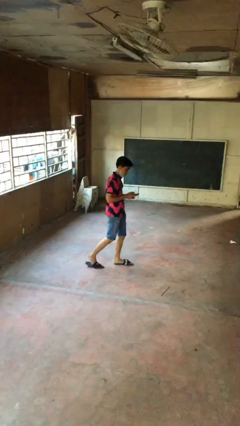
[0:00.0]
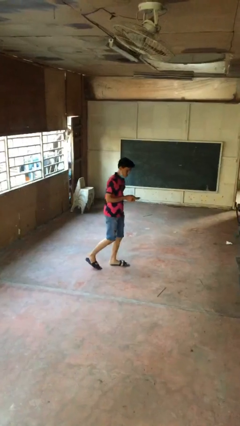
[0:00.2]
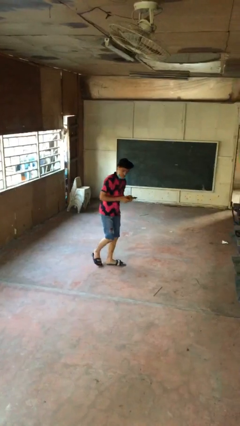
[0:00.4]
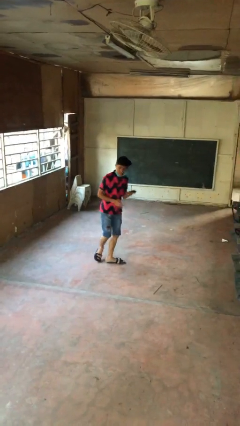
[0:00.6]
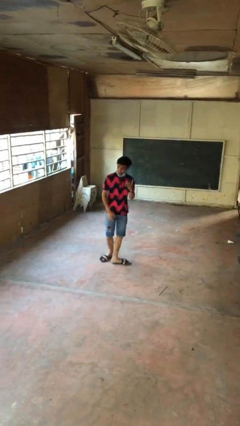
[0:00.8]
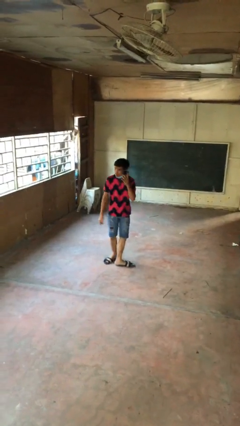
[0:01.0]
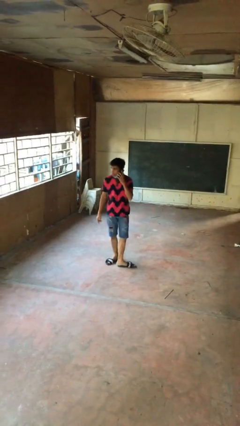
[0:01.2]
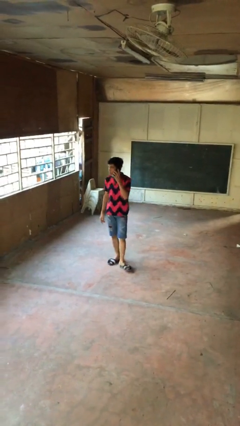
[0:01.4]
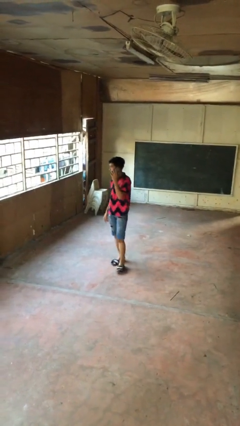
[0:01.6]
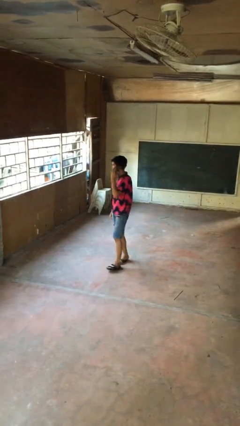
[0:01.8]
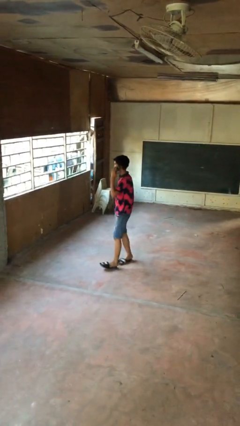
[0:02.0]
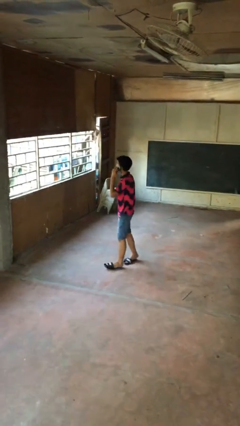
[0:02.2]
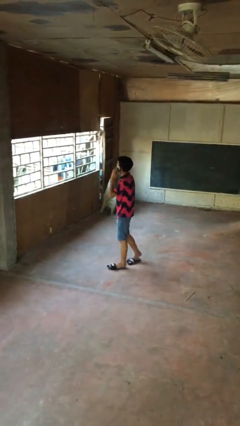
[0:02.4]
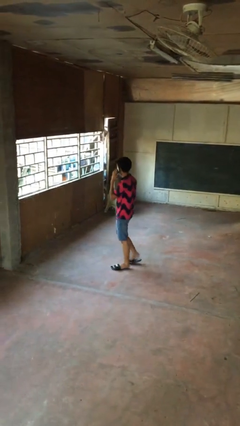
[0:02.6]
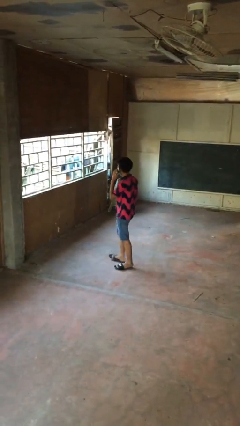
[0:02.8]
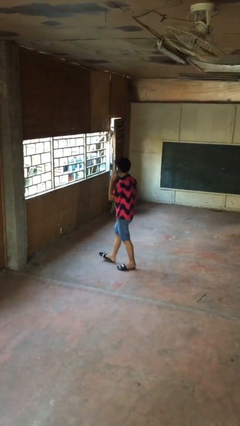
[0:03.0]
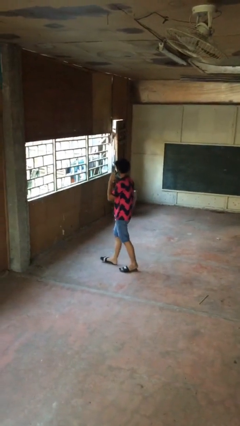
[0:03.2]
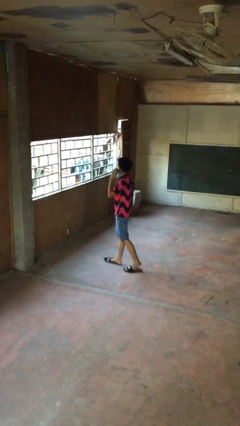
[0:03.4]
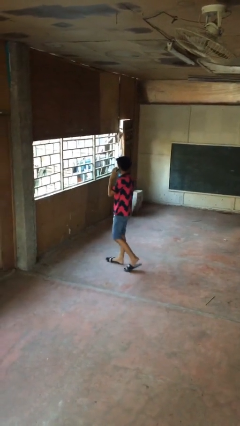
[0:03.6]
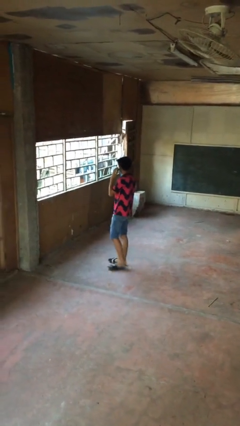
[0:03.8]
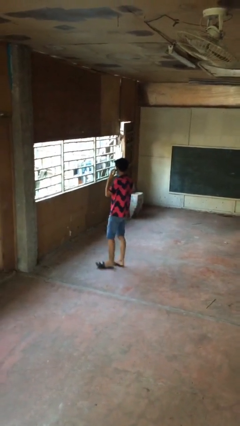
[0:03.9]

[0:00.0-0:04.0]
person talks on phone

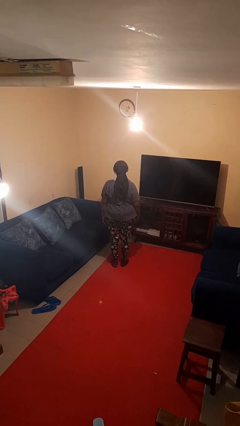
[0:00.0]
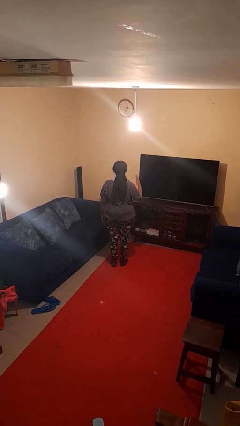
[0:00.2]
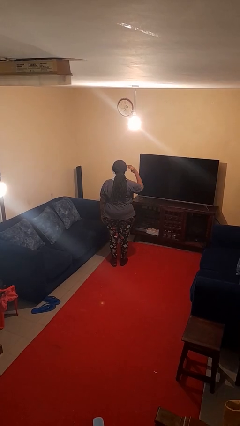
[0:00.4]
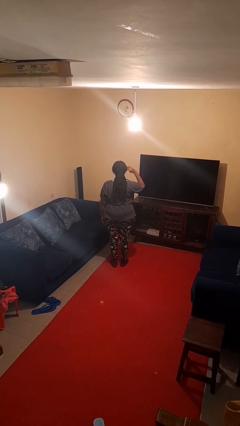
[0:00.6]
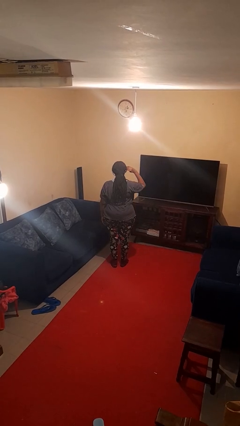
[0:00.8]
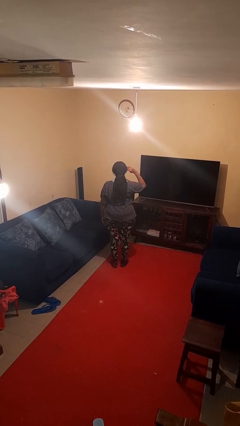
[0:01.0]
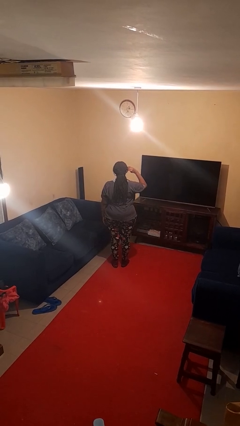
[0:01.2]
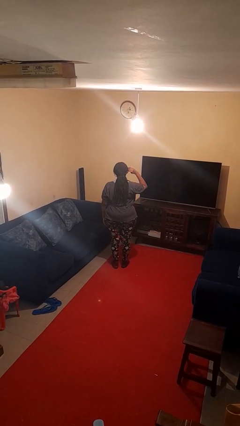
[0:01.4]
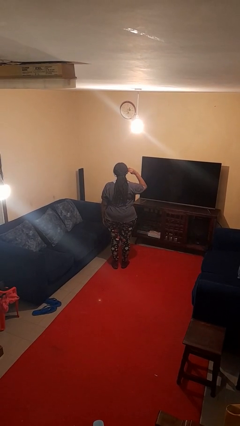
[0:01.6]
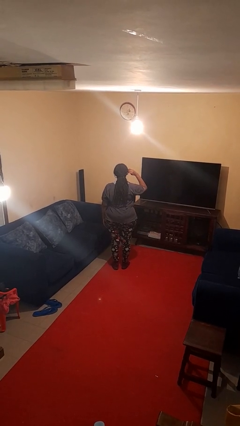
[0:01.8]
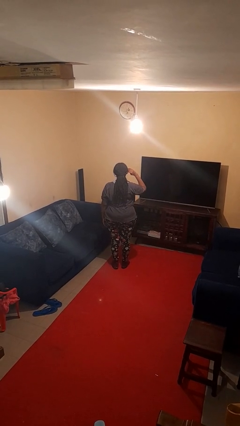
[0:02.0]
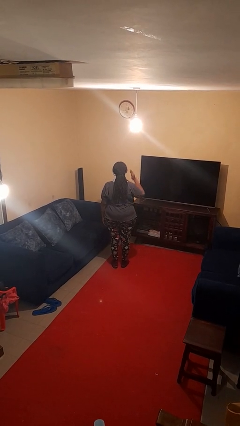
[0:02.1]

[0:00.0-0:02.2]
person salutes

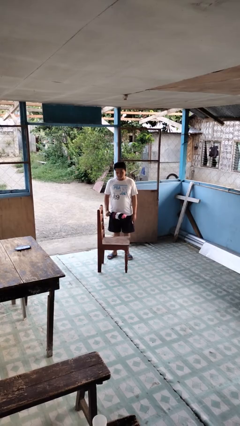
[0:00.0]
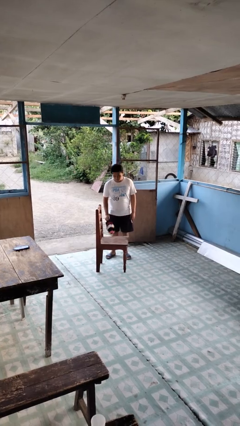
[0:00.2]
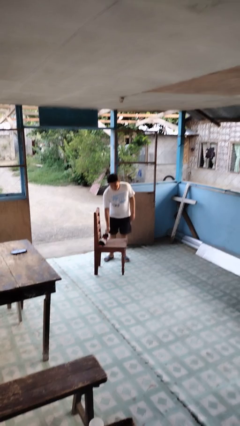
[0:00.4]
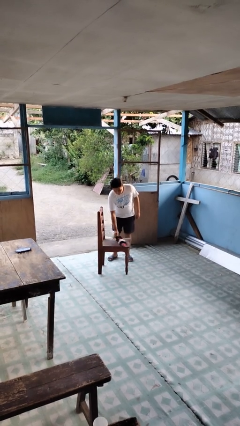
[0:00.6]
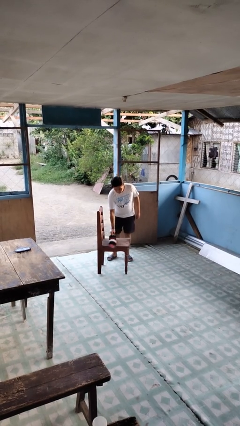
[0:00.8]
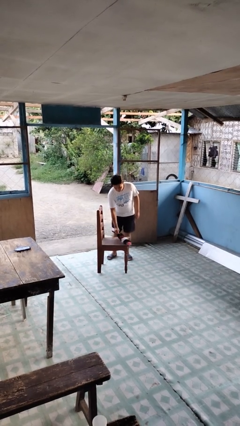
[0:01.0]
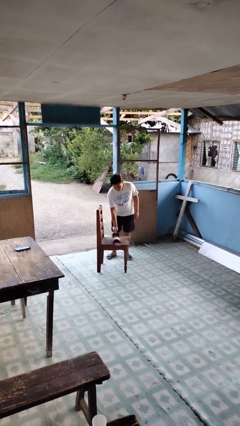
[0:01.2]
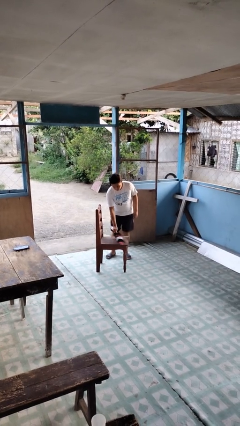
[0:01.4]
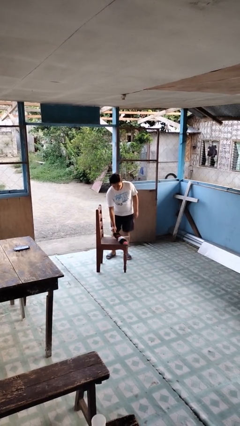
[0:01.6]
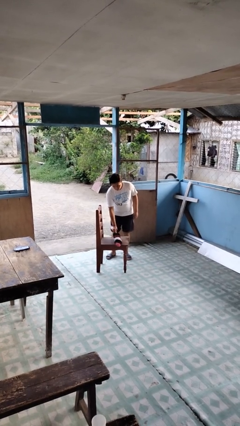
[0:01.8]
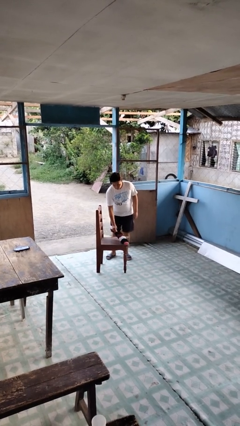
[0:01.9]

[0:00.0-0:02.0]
person dusts furniture

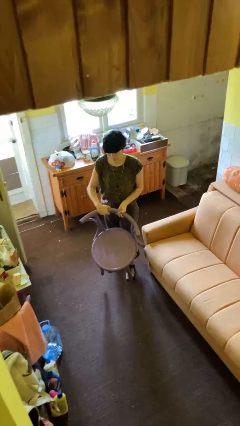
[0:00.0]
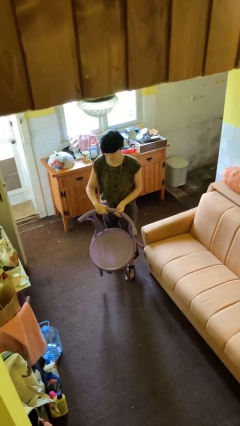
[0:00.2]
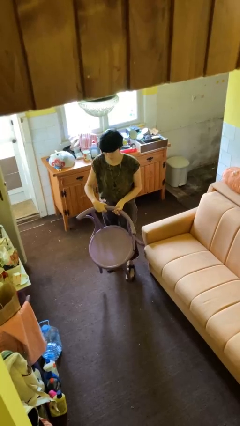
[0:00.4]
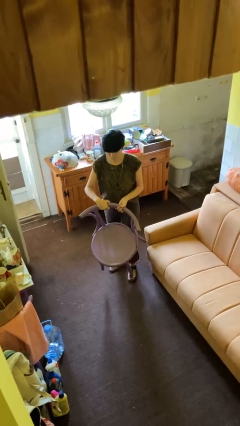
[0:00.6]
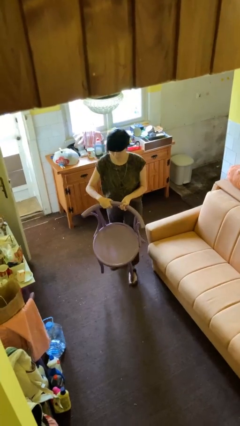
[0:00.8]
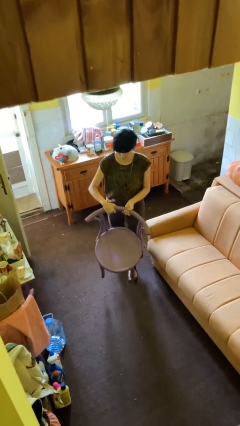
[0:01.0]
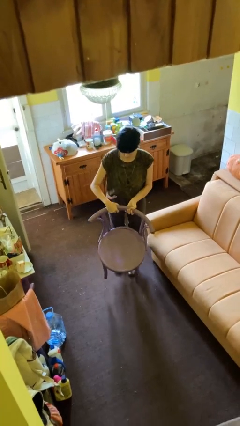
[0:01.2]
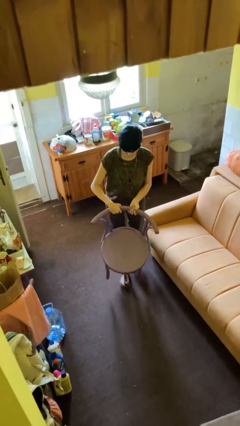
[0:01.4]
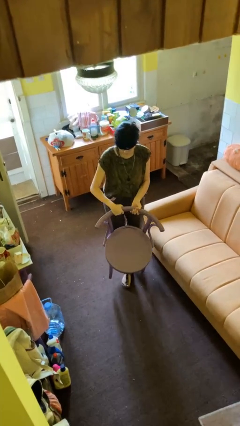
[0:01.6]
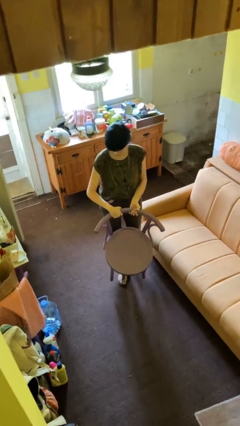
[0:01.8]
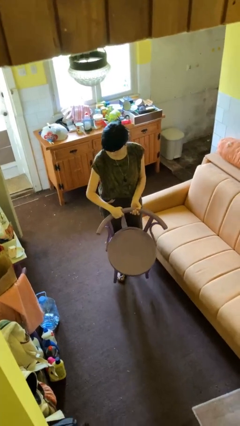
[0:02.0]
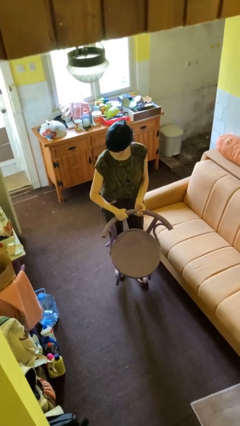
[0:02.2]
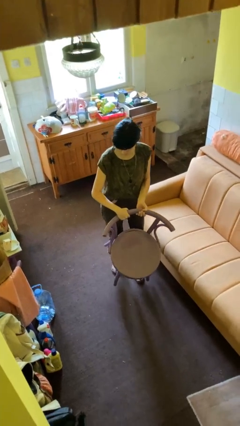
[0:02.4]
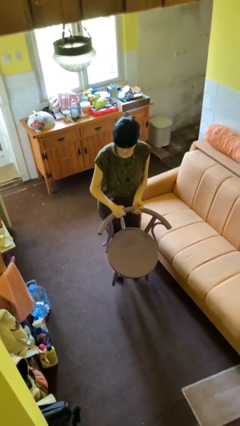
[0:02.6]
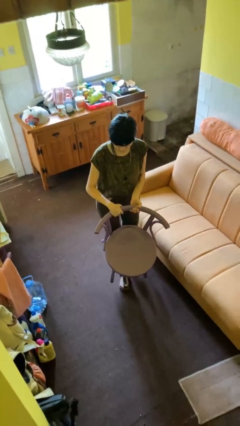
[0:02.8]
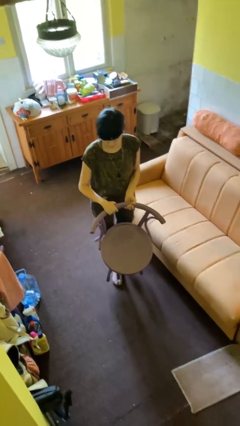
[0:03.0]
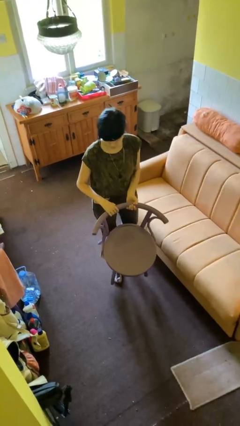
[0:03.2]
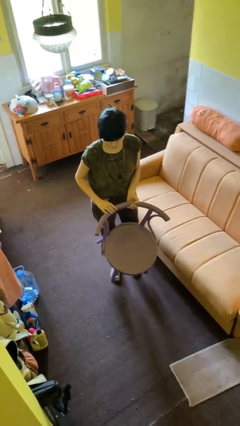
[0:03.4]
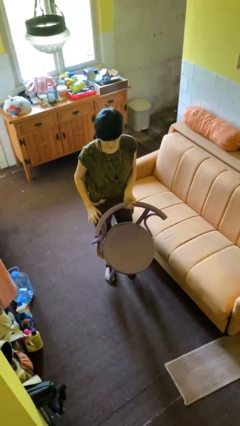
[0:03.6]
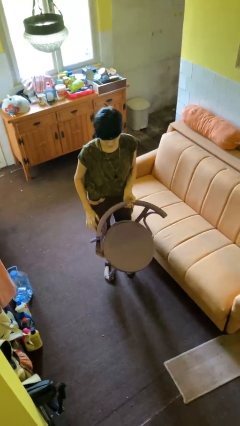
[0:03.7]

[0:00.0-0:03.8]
person carries furniture

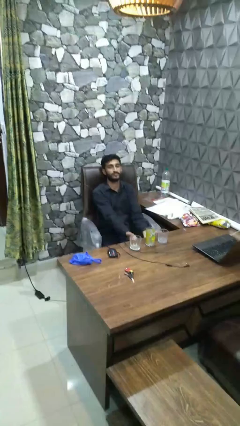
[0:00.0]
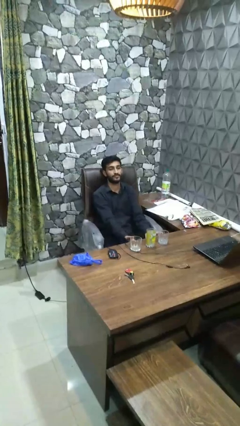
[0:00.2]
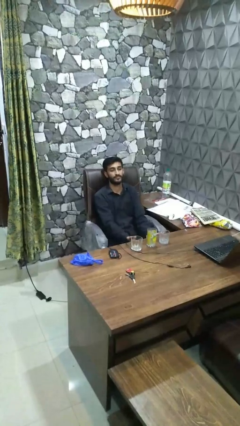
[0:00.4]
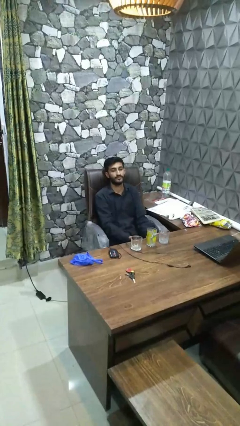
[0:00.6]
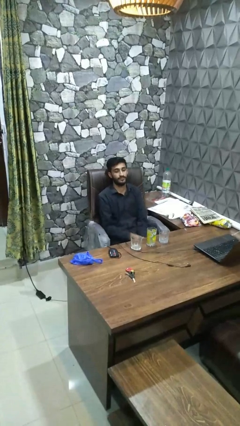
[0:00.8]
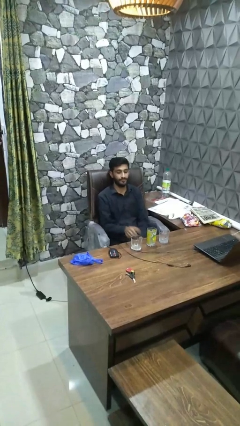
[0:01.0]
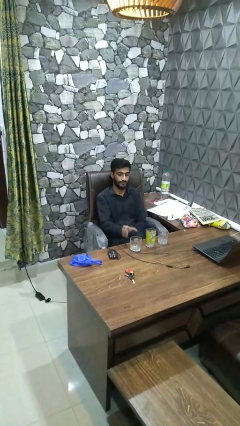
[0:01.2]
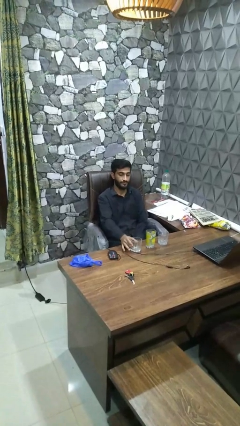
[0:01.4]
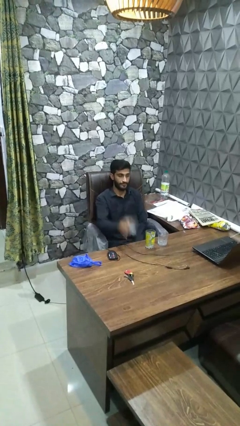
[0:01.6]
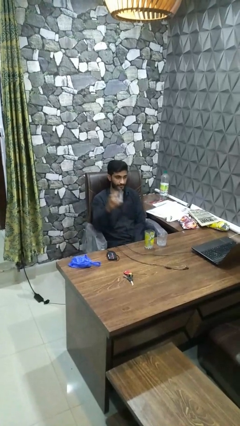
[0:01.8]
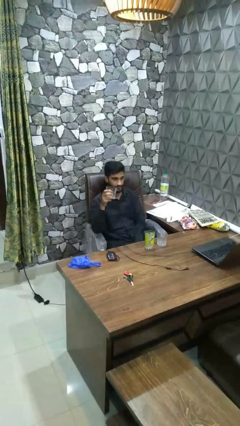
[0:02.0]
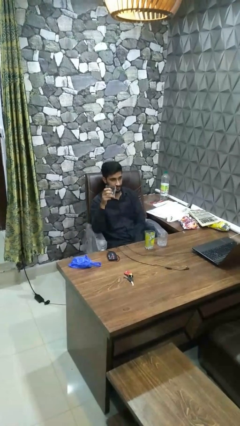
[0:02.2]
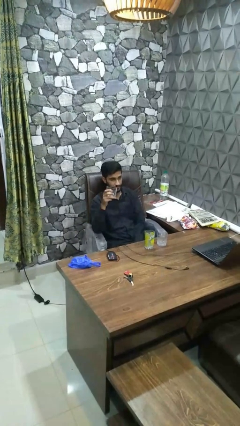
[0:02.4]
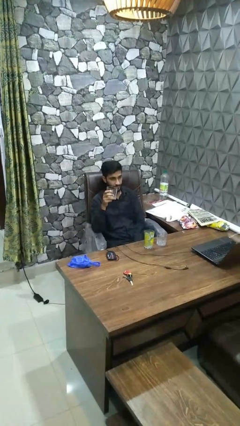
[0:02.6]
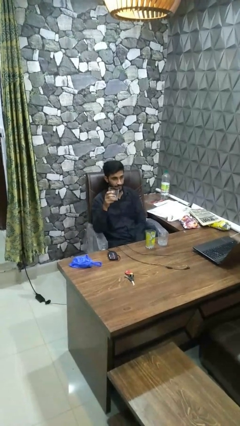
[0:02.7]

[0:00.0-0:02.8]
person picks up object from table

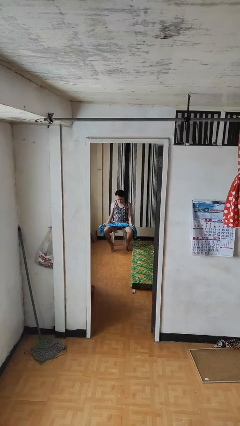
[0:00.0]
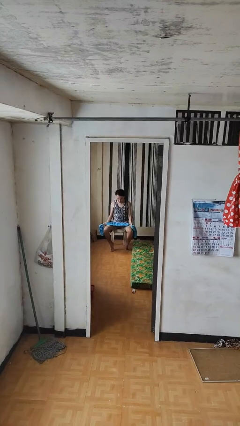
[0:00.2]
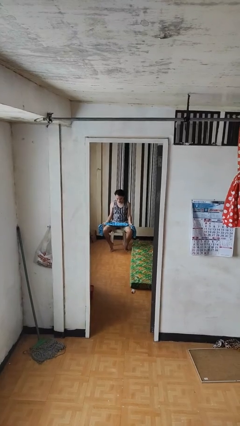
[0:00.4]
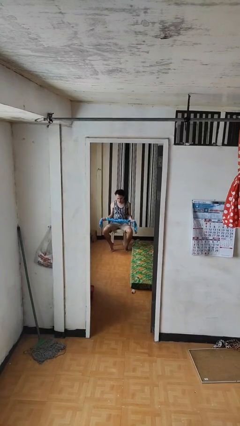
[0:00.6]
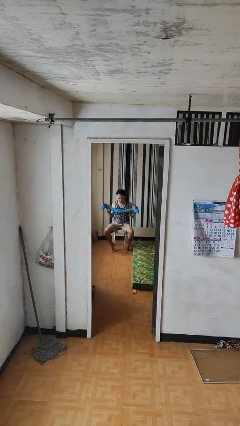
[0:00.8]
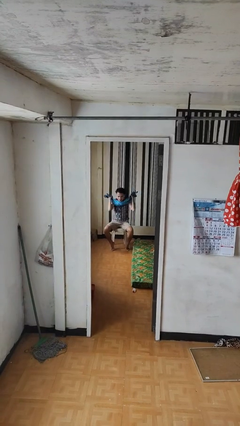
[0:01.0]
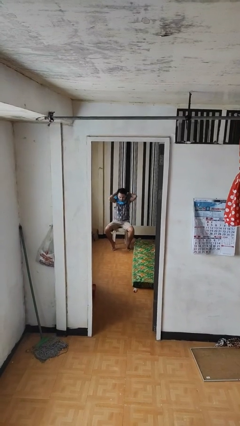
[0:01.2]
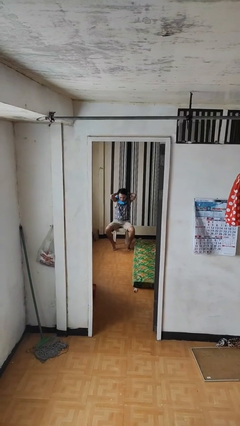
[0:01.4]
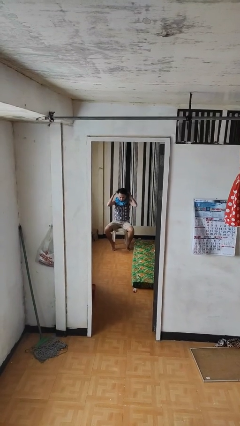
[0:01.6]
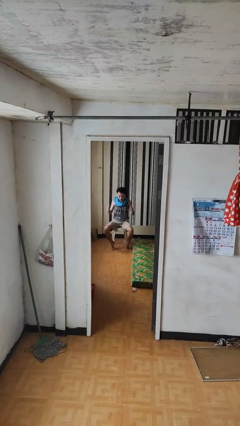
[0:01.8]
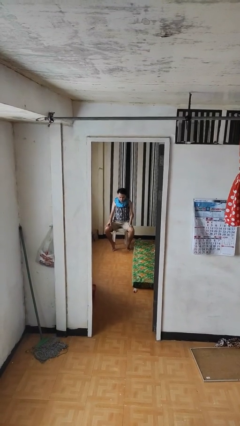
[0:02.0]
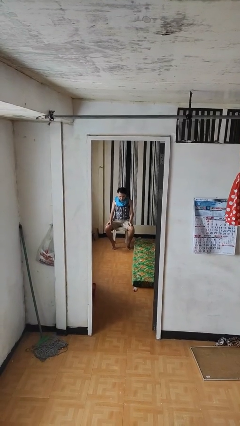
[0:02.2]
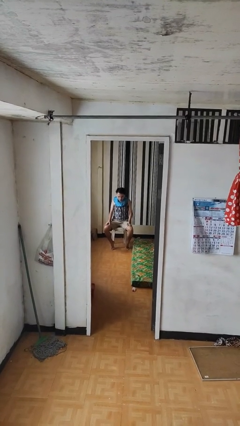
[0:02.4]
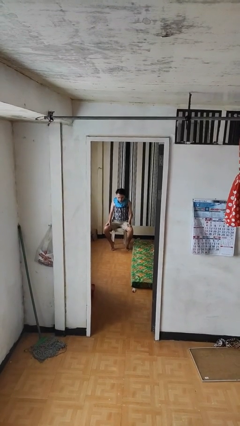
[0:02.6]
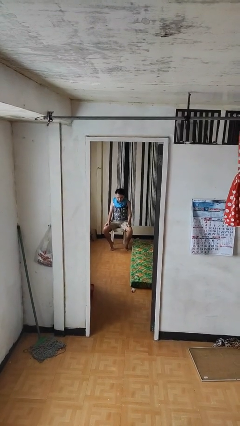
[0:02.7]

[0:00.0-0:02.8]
person puts on scarf

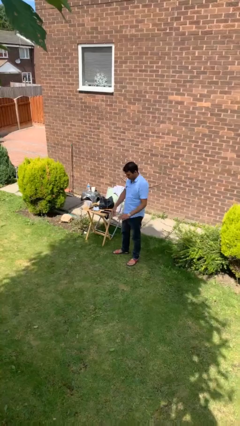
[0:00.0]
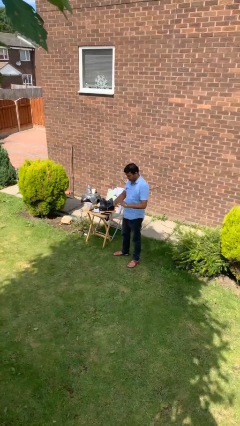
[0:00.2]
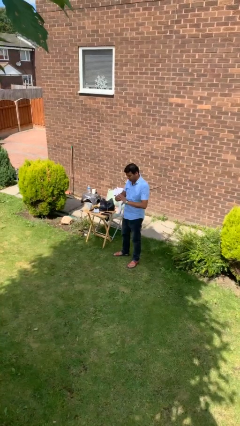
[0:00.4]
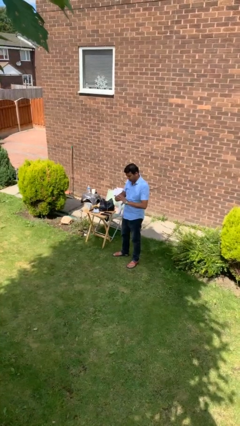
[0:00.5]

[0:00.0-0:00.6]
person takes off ring
